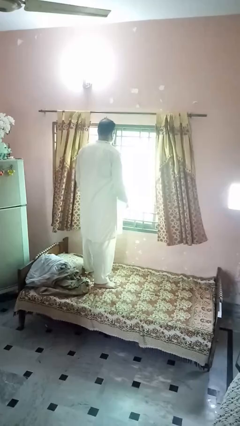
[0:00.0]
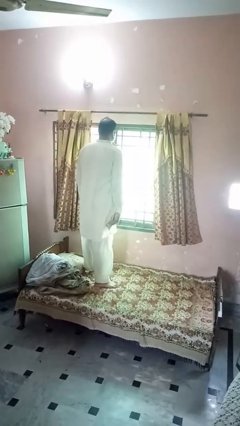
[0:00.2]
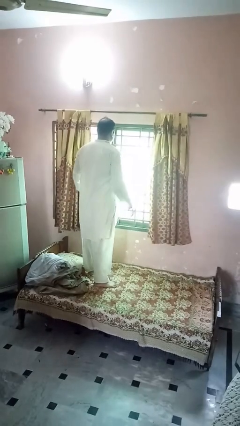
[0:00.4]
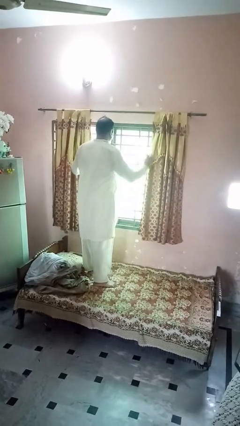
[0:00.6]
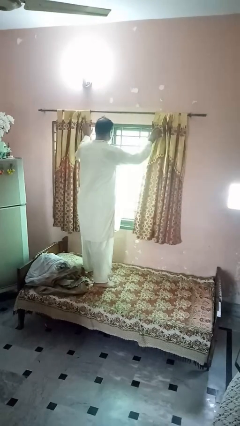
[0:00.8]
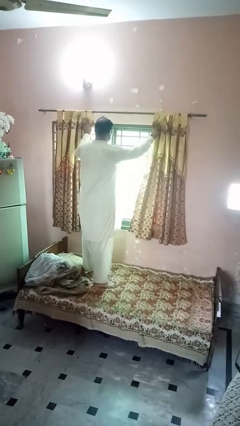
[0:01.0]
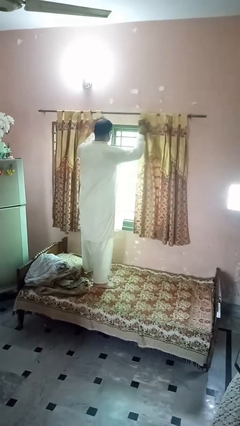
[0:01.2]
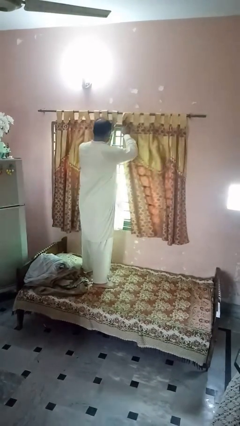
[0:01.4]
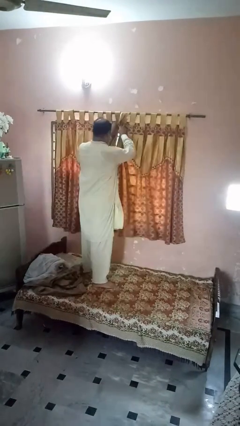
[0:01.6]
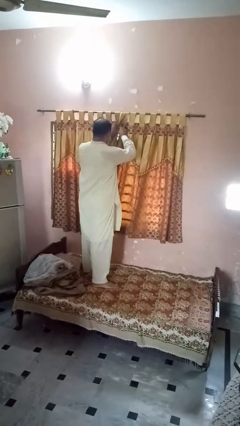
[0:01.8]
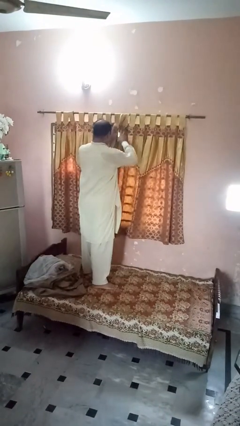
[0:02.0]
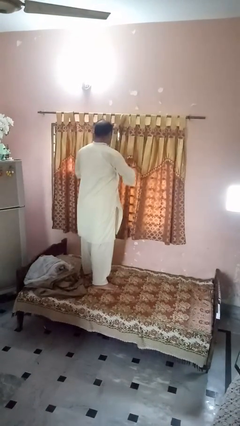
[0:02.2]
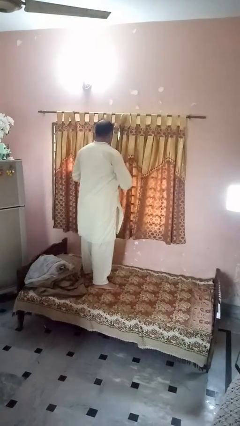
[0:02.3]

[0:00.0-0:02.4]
person closes curtains

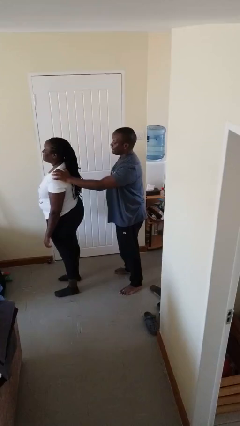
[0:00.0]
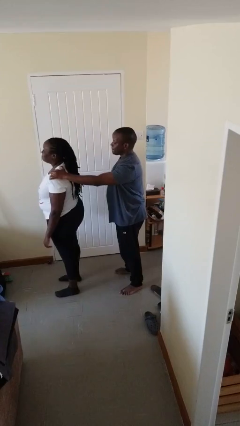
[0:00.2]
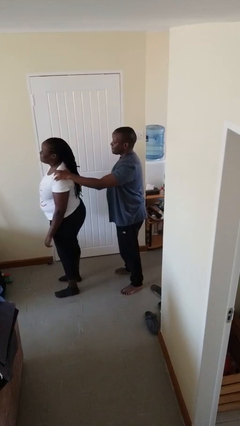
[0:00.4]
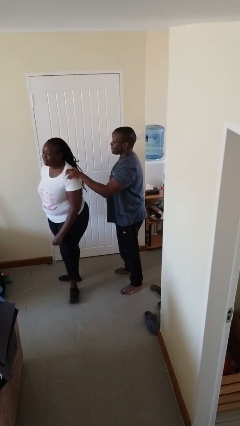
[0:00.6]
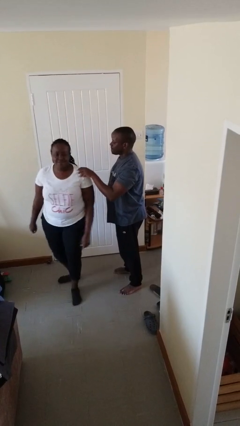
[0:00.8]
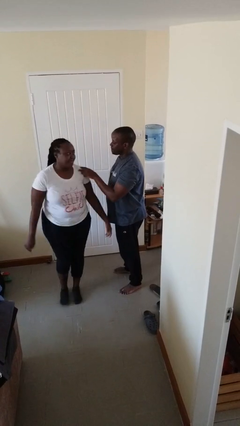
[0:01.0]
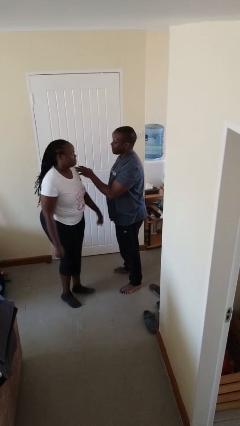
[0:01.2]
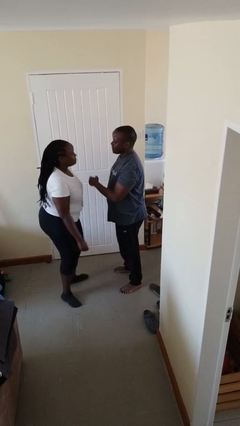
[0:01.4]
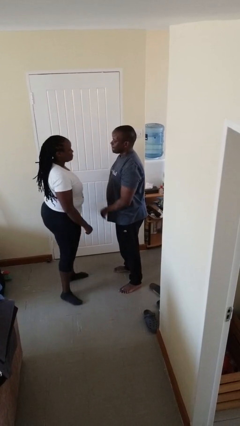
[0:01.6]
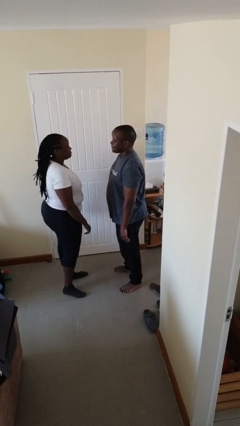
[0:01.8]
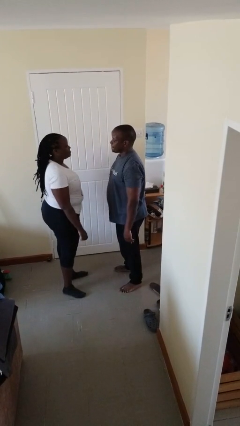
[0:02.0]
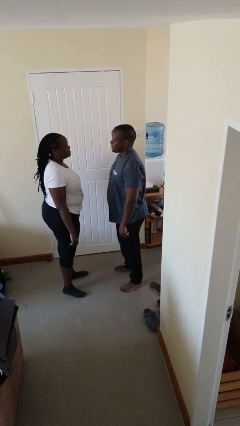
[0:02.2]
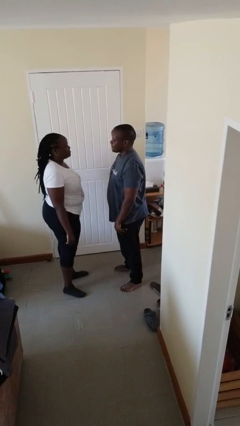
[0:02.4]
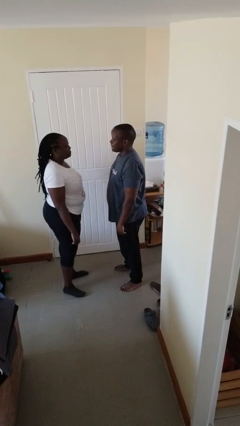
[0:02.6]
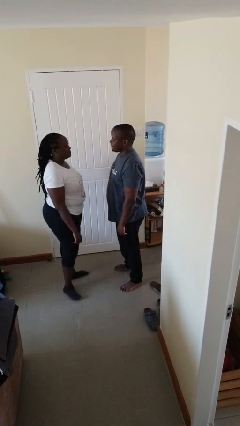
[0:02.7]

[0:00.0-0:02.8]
person spins person around

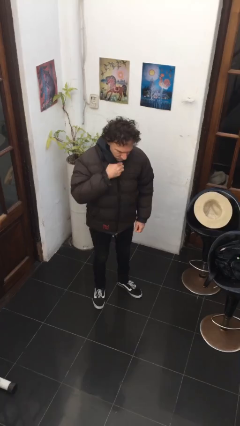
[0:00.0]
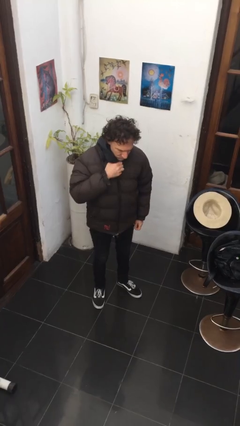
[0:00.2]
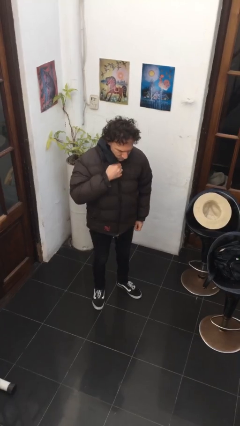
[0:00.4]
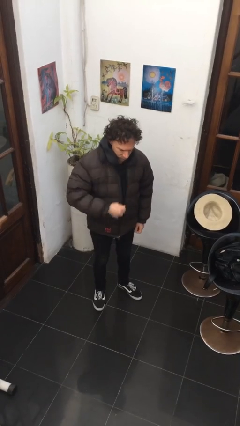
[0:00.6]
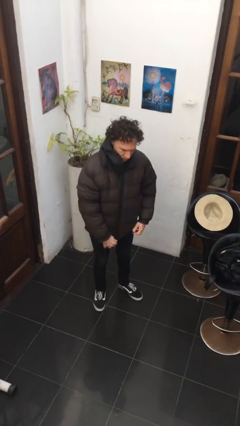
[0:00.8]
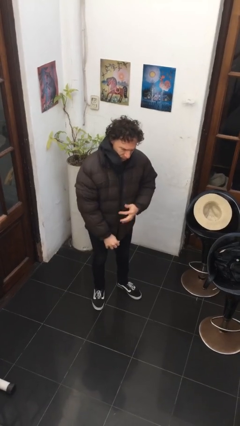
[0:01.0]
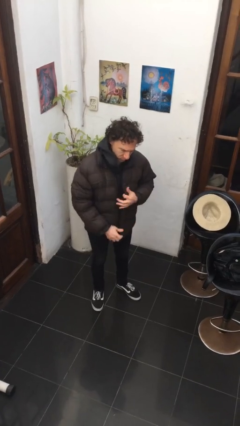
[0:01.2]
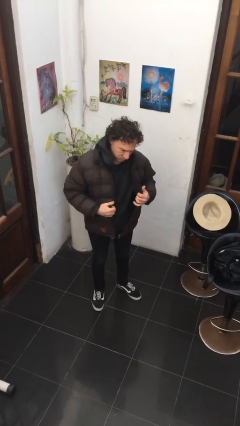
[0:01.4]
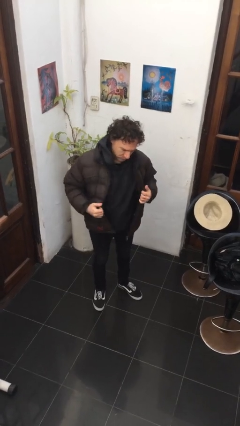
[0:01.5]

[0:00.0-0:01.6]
person unzips jacket

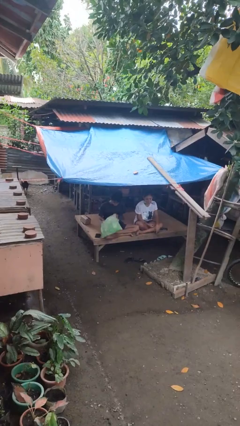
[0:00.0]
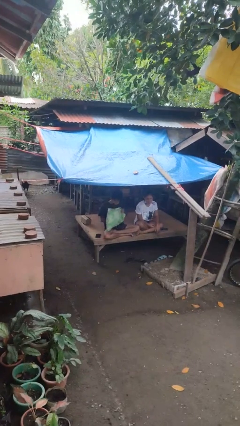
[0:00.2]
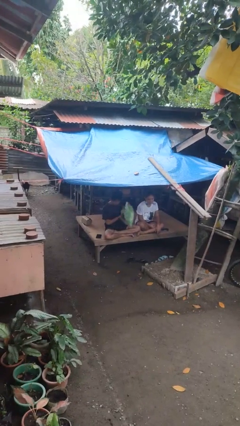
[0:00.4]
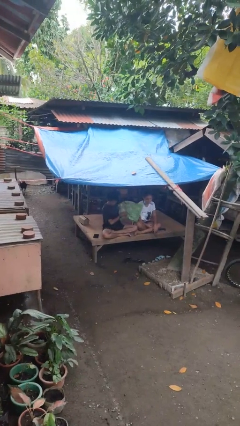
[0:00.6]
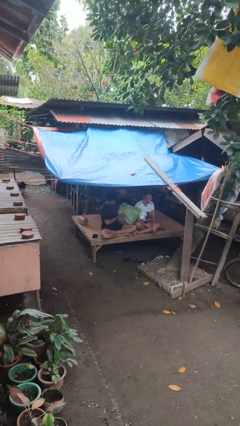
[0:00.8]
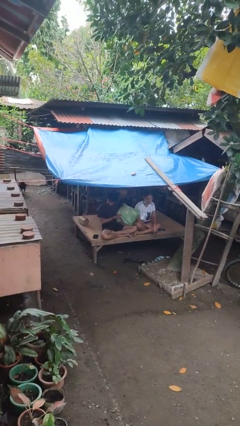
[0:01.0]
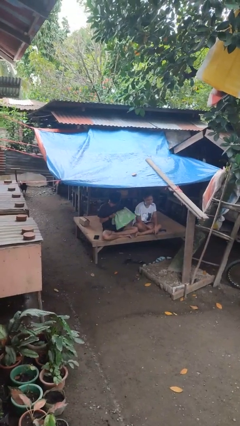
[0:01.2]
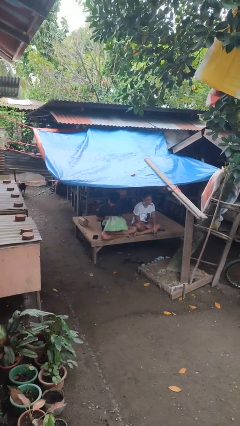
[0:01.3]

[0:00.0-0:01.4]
person hits person with pillow

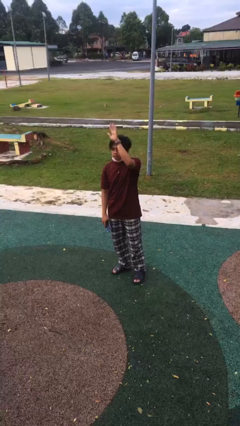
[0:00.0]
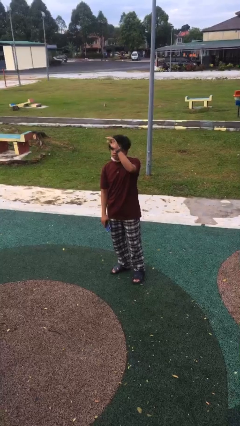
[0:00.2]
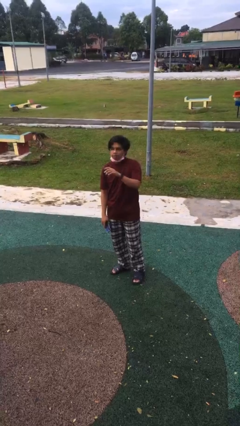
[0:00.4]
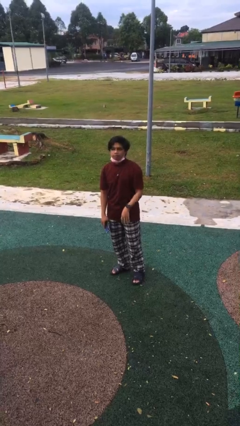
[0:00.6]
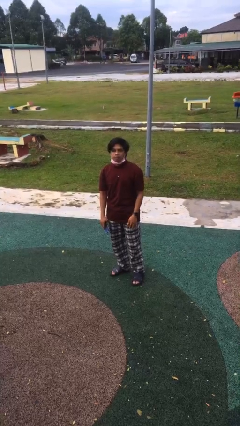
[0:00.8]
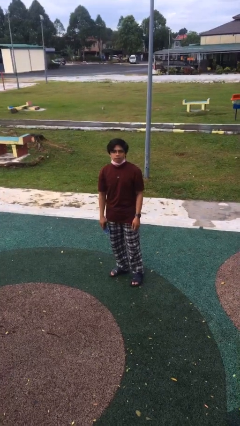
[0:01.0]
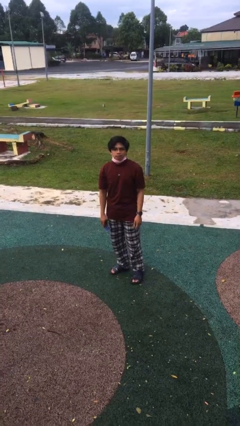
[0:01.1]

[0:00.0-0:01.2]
person gestures lower hand

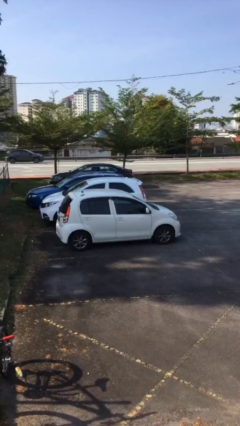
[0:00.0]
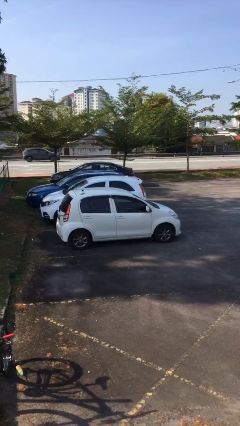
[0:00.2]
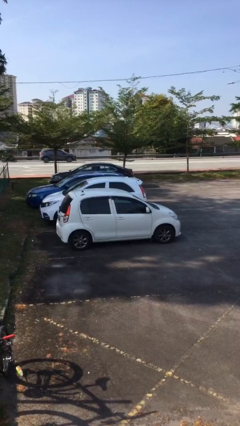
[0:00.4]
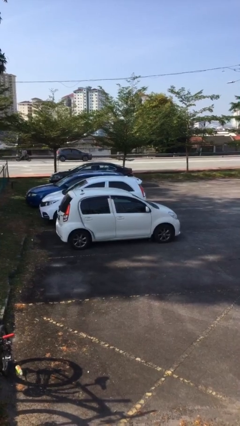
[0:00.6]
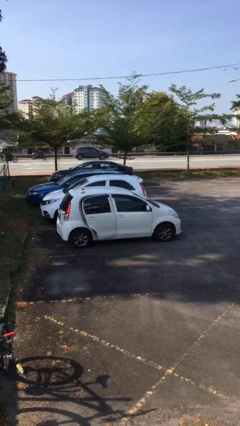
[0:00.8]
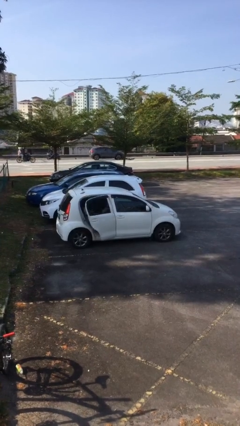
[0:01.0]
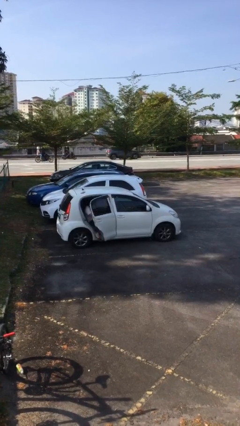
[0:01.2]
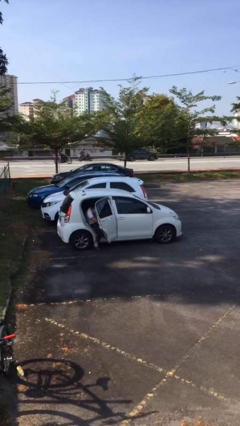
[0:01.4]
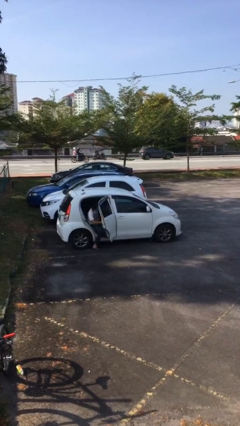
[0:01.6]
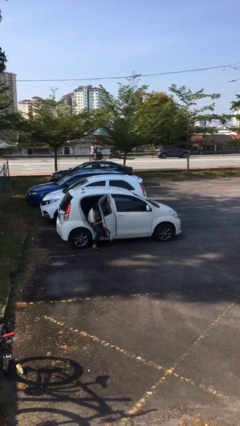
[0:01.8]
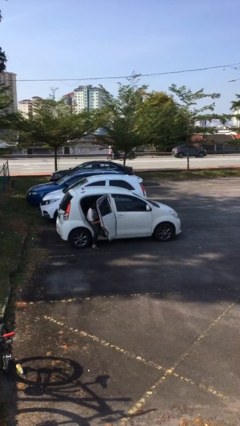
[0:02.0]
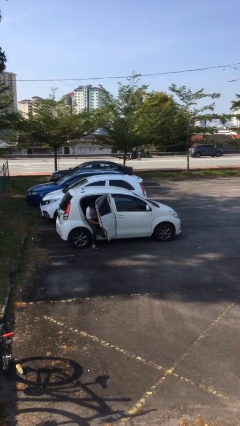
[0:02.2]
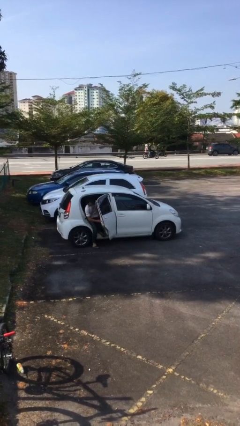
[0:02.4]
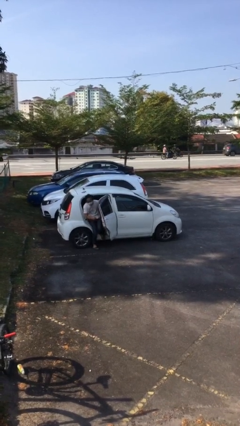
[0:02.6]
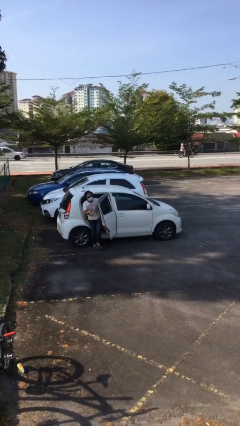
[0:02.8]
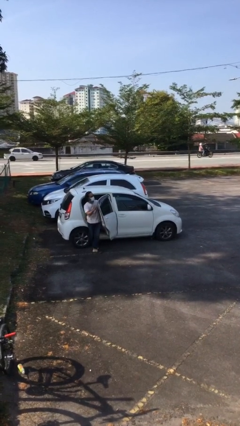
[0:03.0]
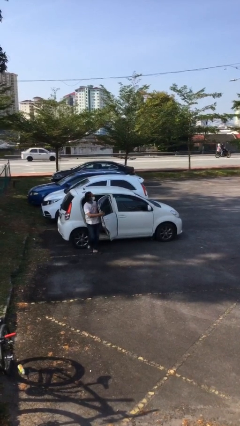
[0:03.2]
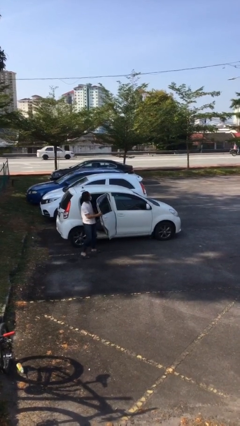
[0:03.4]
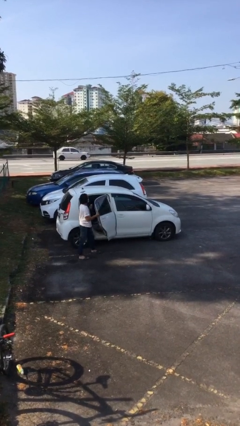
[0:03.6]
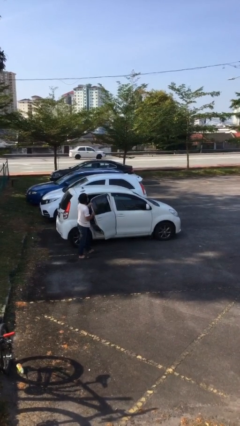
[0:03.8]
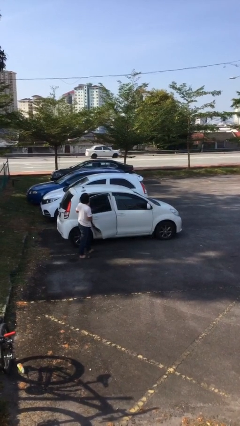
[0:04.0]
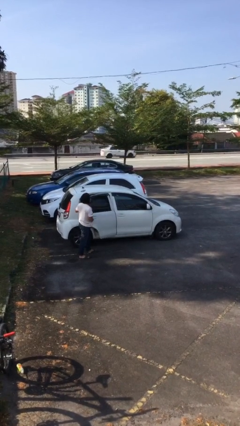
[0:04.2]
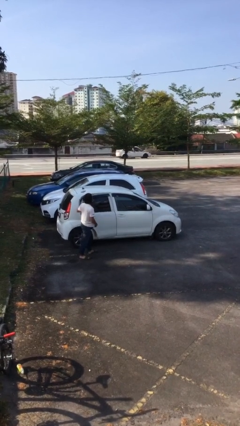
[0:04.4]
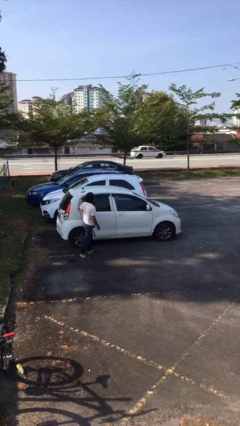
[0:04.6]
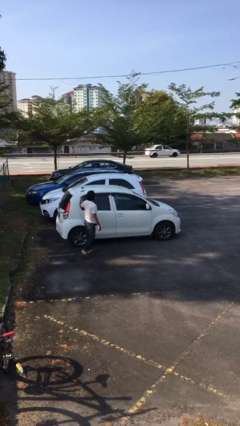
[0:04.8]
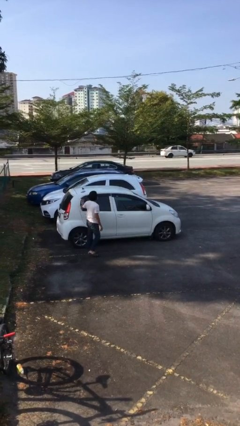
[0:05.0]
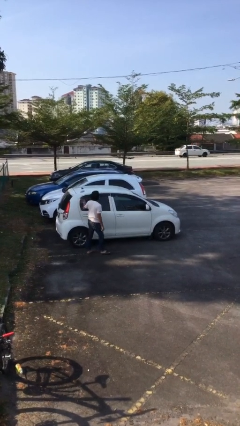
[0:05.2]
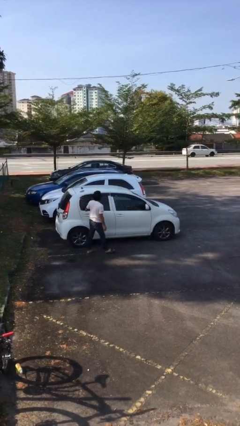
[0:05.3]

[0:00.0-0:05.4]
car drops off person

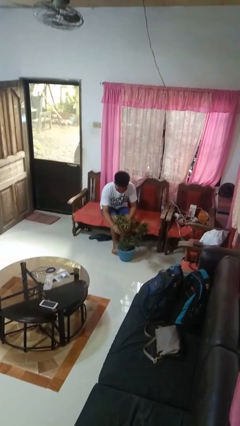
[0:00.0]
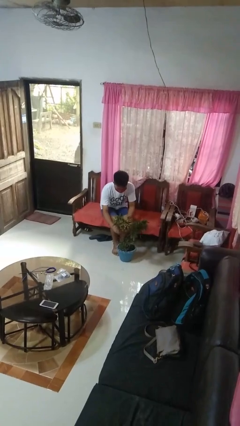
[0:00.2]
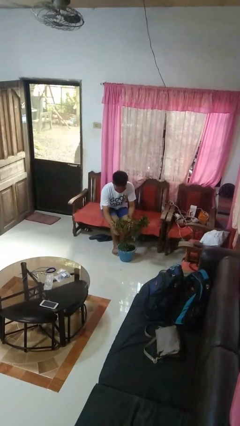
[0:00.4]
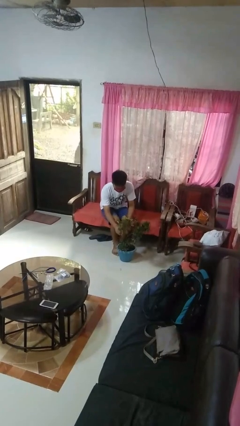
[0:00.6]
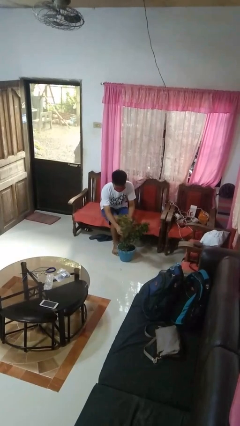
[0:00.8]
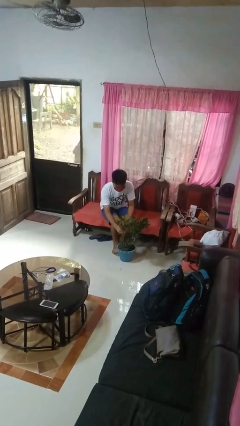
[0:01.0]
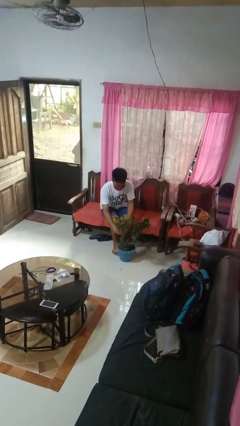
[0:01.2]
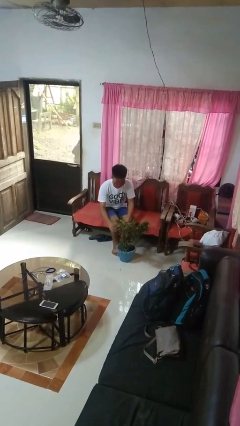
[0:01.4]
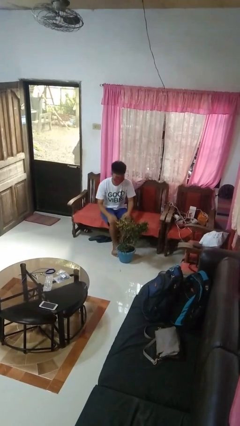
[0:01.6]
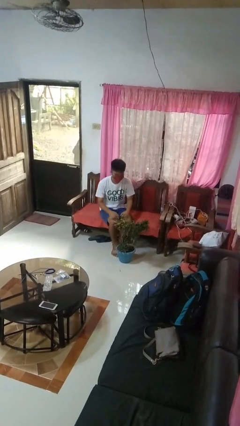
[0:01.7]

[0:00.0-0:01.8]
person arranges flowers in vase

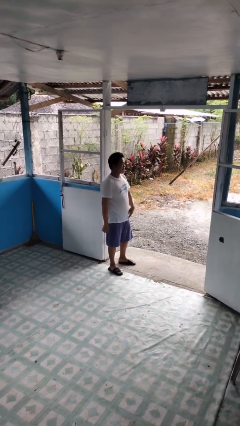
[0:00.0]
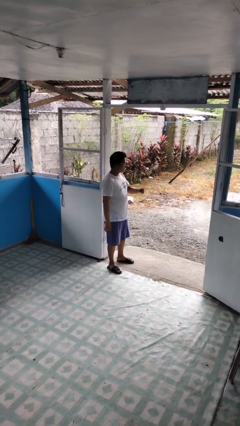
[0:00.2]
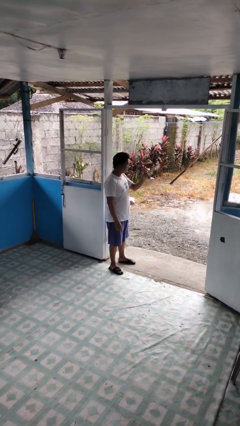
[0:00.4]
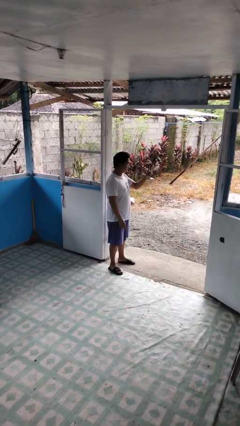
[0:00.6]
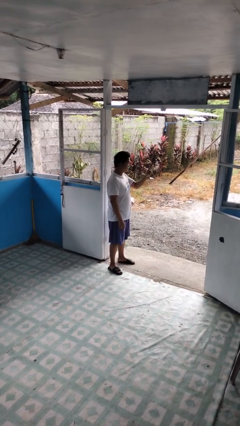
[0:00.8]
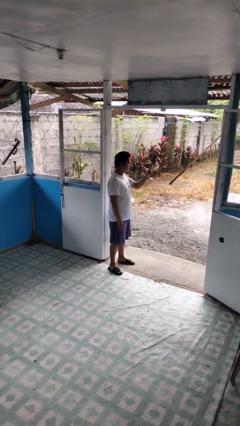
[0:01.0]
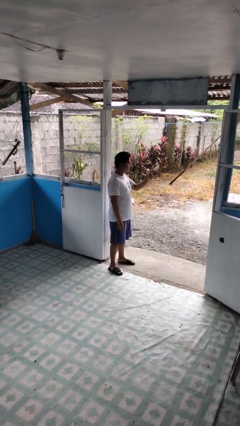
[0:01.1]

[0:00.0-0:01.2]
person gestures number one
